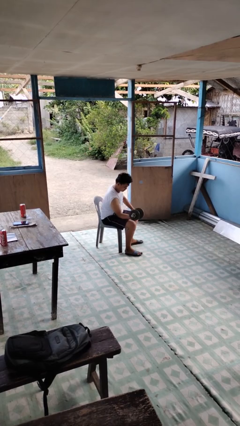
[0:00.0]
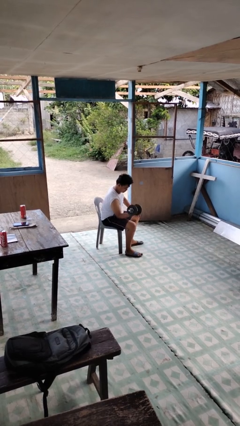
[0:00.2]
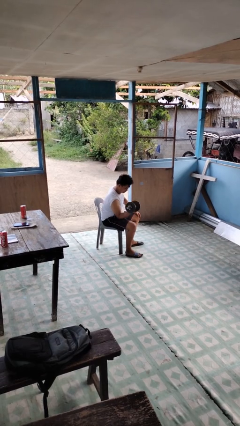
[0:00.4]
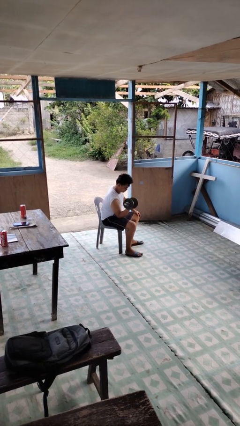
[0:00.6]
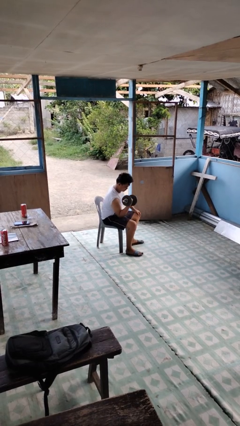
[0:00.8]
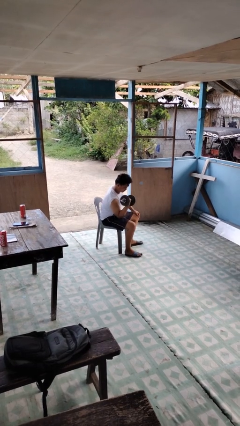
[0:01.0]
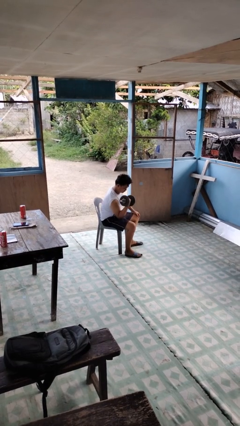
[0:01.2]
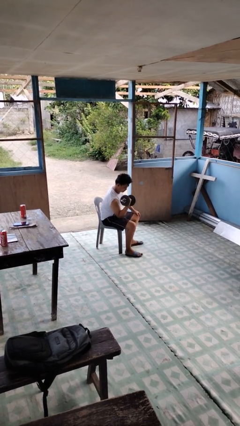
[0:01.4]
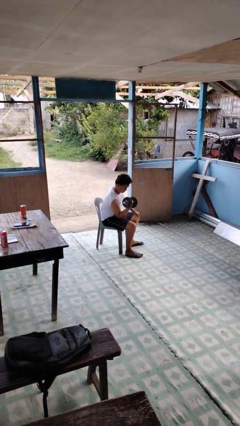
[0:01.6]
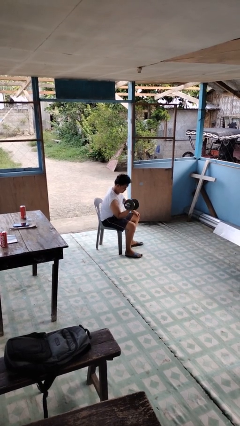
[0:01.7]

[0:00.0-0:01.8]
person lifts dumbbells

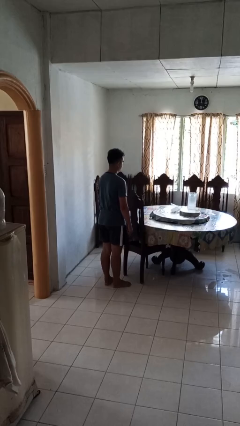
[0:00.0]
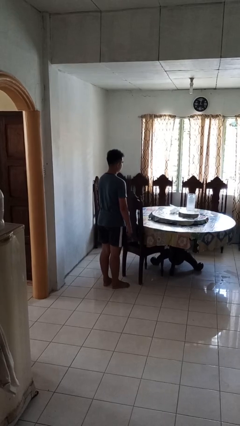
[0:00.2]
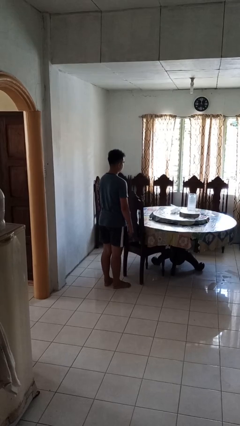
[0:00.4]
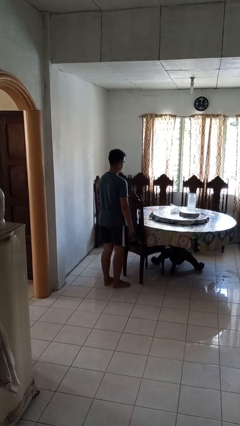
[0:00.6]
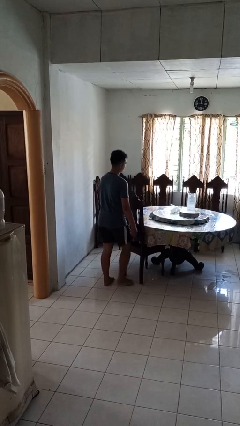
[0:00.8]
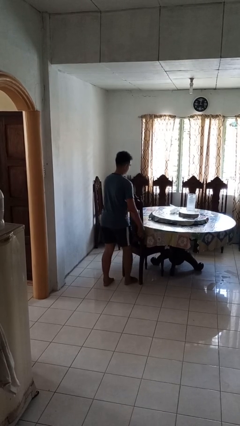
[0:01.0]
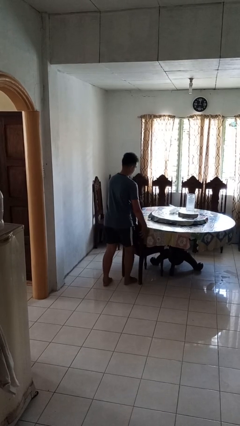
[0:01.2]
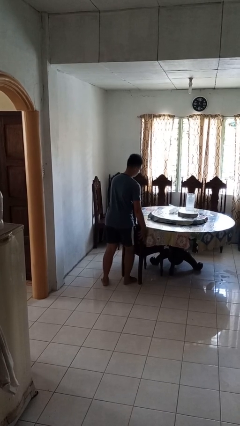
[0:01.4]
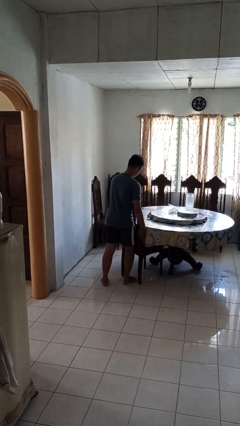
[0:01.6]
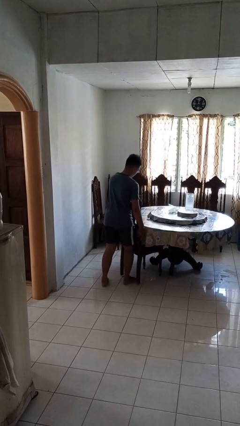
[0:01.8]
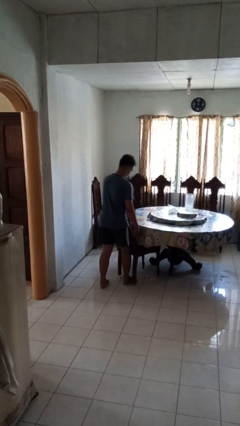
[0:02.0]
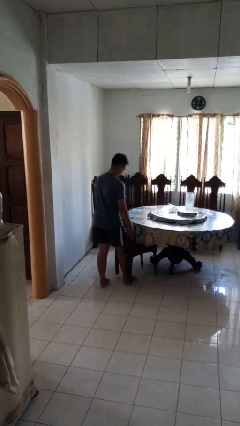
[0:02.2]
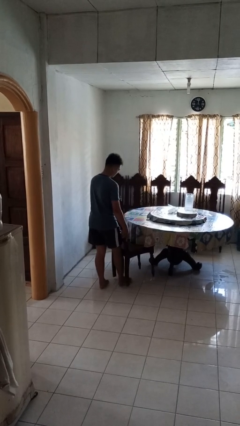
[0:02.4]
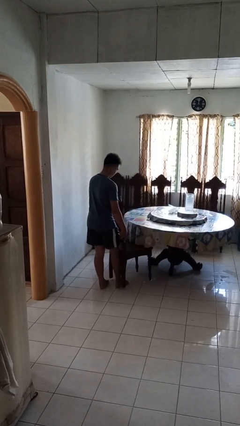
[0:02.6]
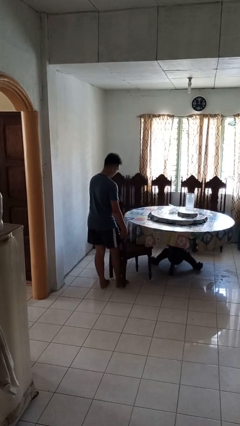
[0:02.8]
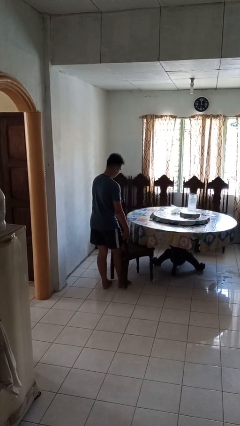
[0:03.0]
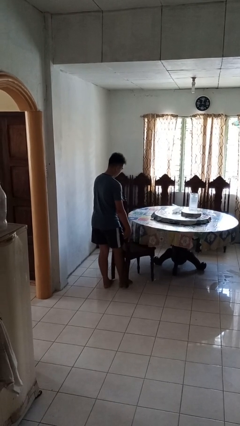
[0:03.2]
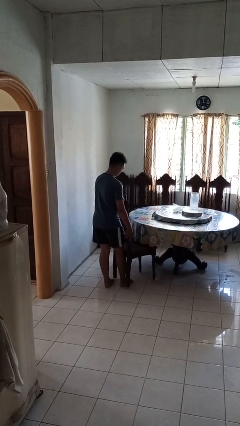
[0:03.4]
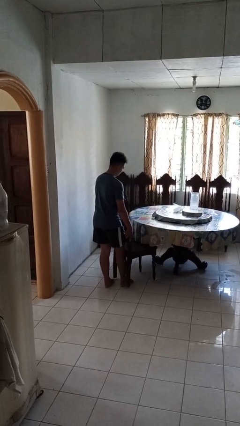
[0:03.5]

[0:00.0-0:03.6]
person pulls out chair

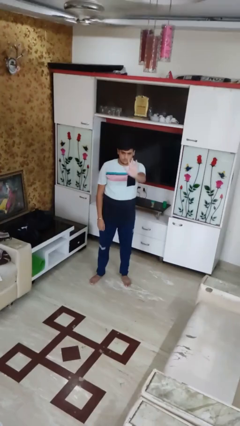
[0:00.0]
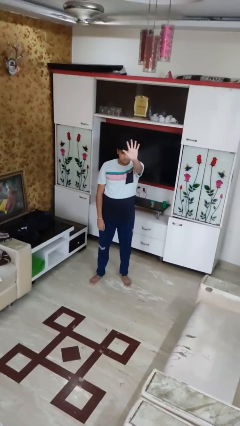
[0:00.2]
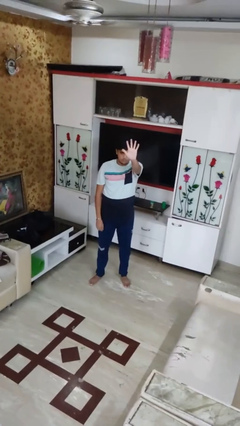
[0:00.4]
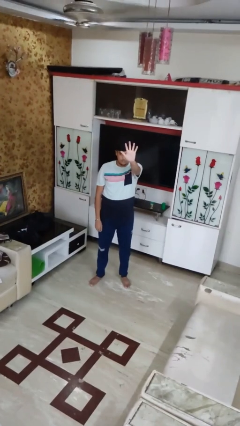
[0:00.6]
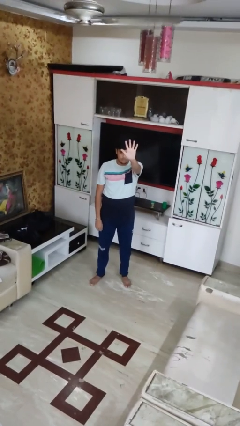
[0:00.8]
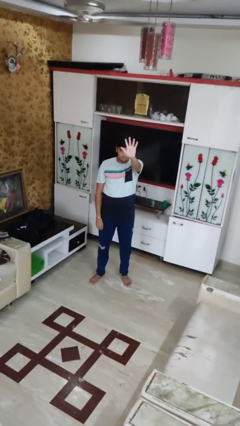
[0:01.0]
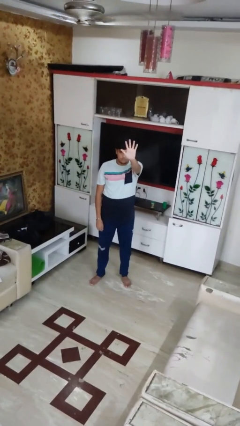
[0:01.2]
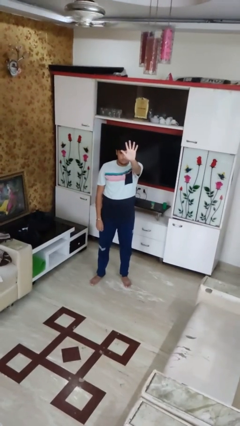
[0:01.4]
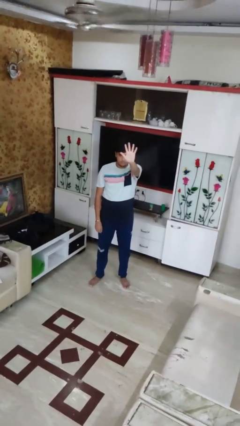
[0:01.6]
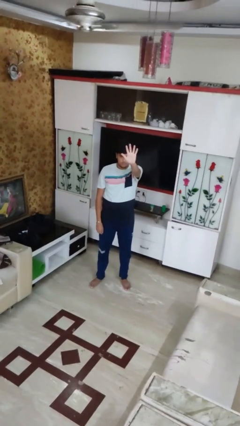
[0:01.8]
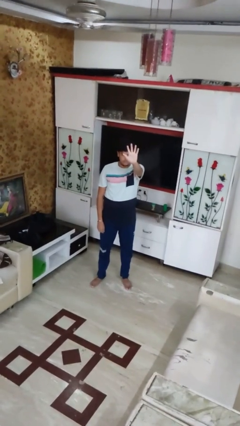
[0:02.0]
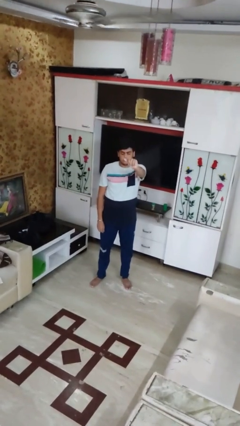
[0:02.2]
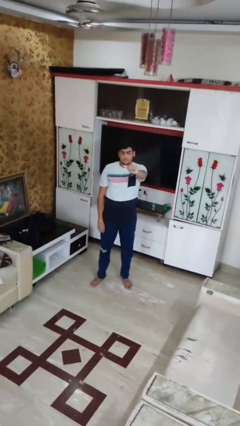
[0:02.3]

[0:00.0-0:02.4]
person gestures number five

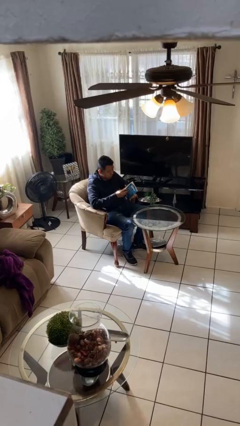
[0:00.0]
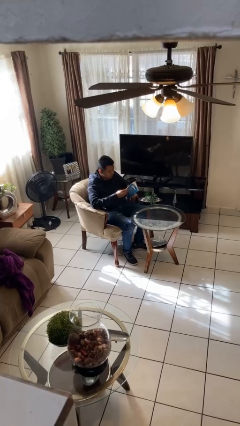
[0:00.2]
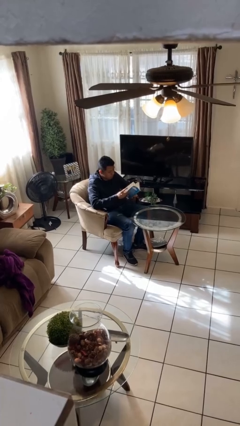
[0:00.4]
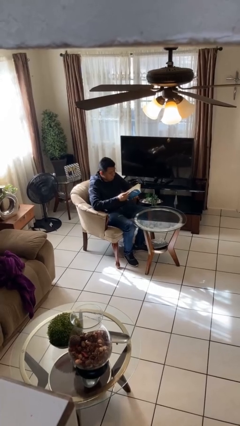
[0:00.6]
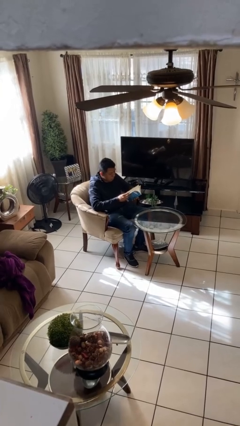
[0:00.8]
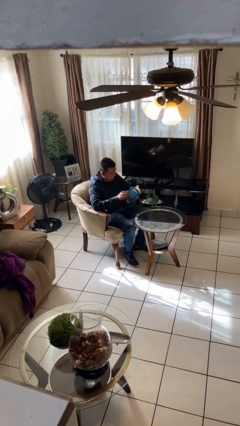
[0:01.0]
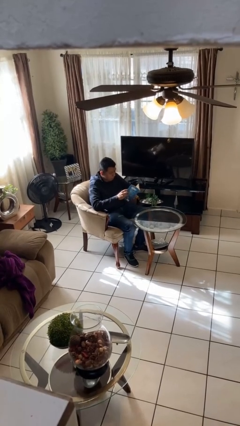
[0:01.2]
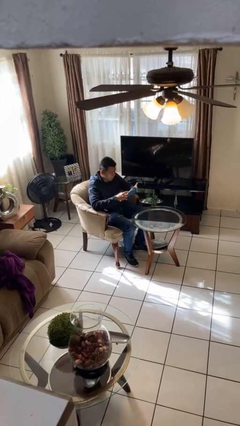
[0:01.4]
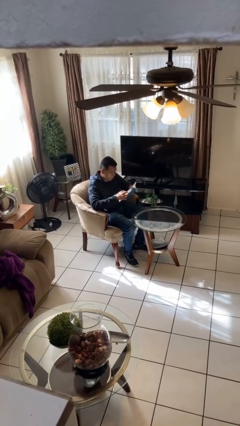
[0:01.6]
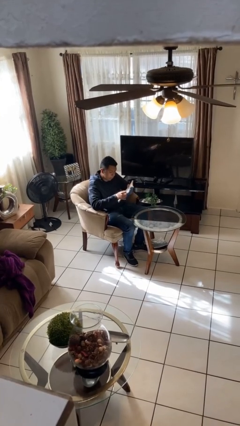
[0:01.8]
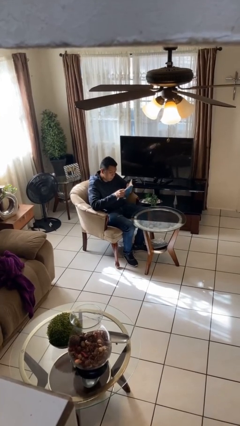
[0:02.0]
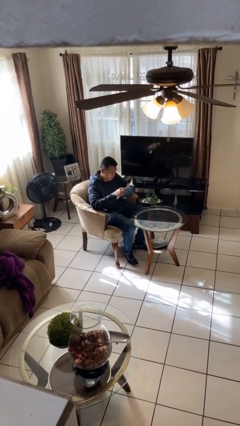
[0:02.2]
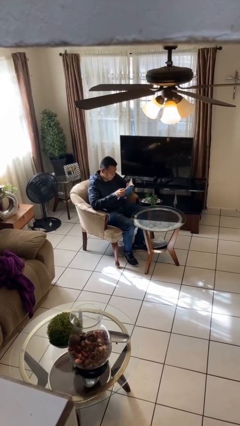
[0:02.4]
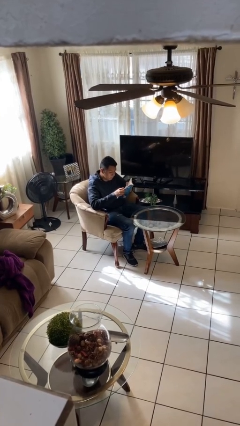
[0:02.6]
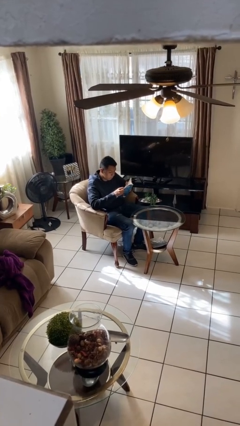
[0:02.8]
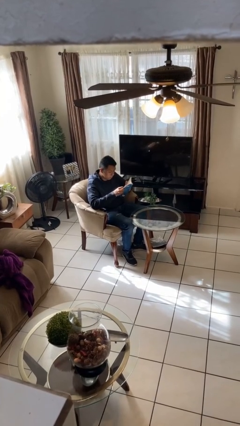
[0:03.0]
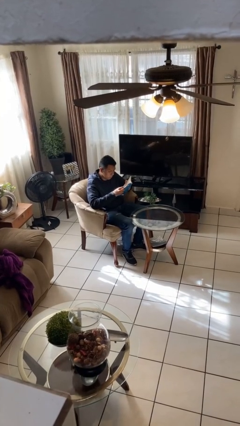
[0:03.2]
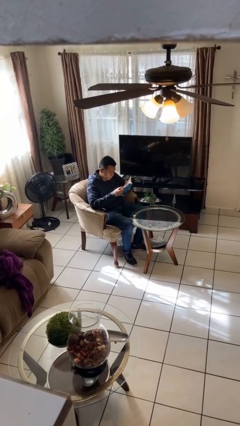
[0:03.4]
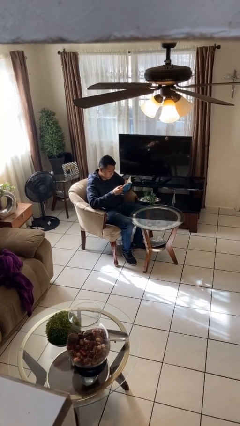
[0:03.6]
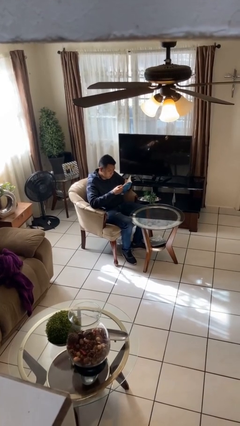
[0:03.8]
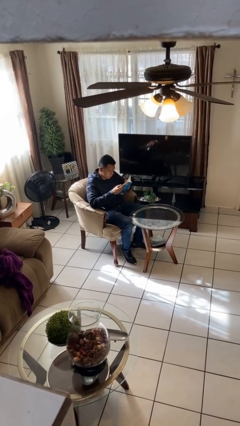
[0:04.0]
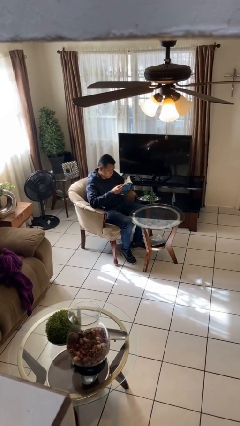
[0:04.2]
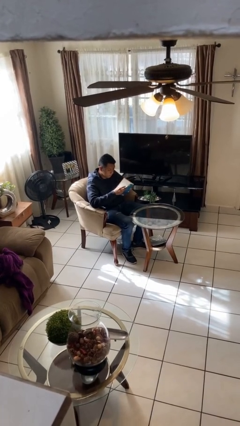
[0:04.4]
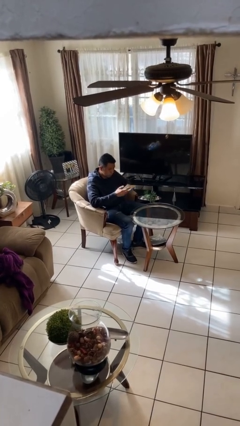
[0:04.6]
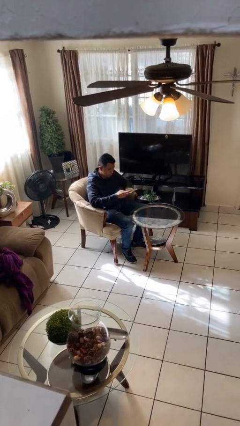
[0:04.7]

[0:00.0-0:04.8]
person reads document

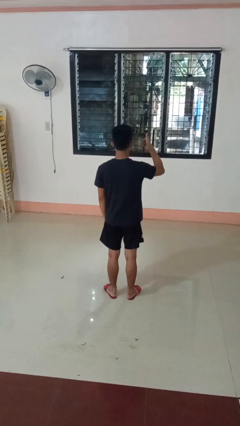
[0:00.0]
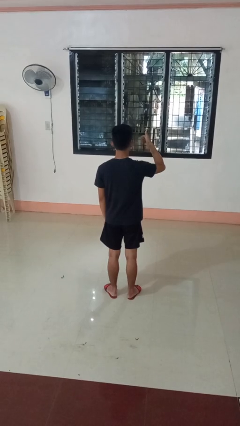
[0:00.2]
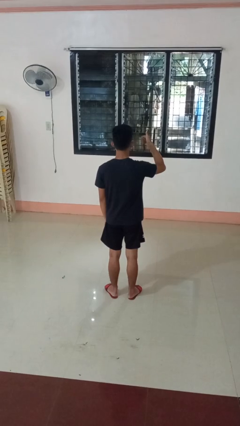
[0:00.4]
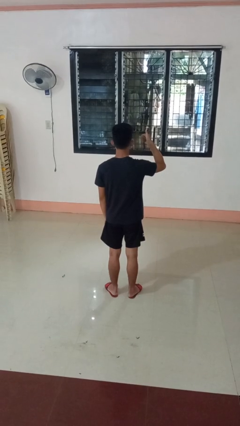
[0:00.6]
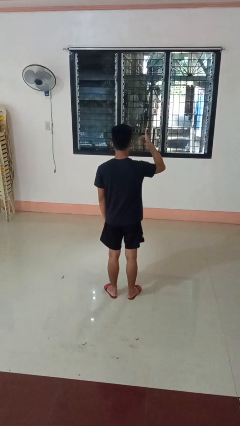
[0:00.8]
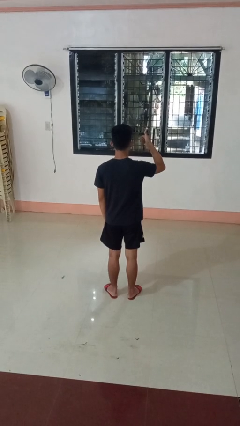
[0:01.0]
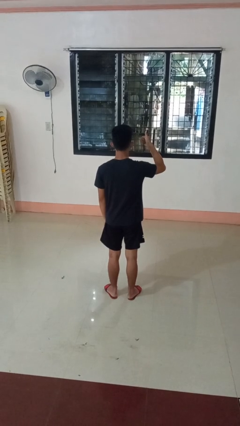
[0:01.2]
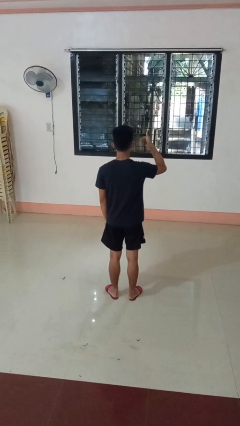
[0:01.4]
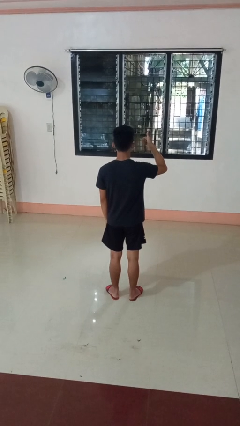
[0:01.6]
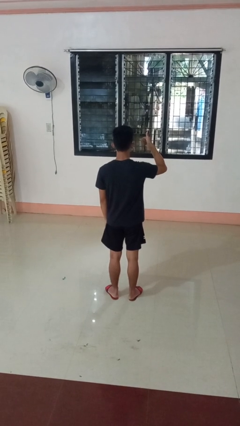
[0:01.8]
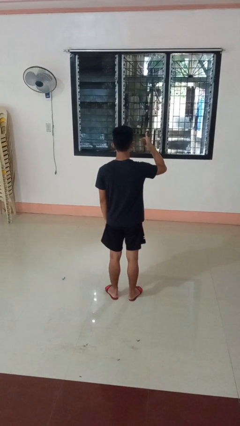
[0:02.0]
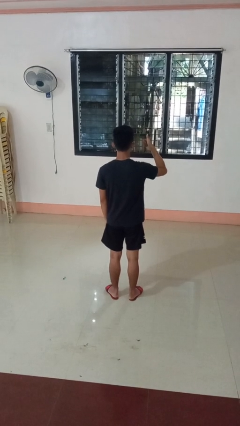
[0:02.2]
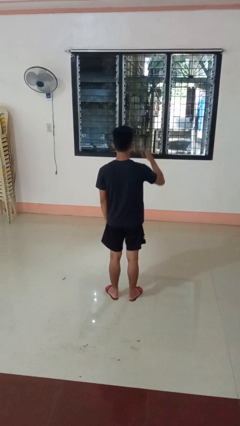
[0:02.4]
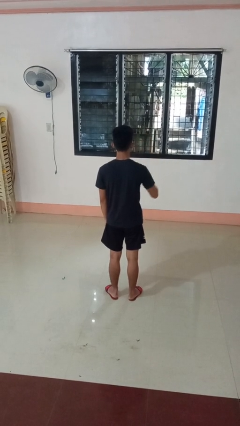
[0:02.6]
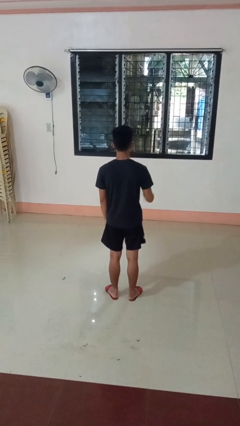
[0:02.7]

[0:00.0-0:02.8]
person gestures thumbs up

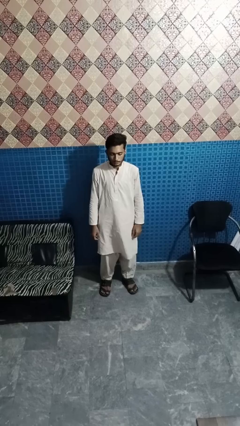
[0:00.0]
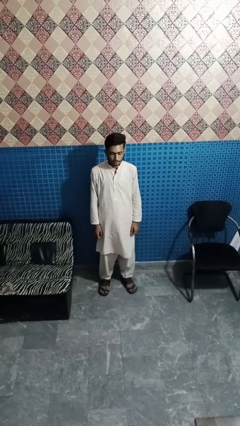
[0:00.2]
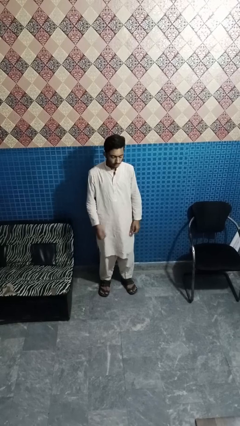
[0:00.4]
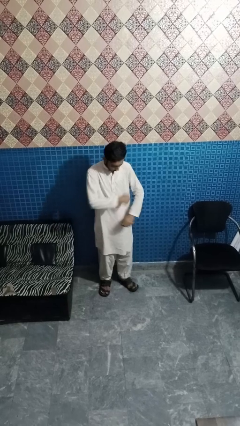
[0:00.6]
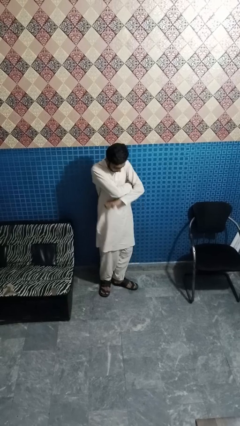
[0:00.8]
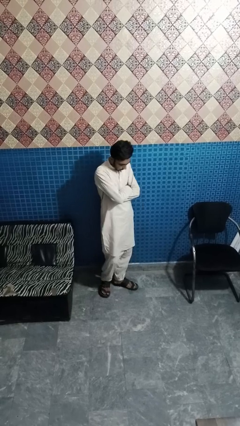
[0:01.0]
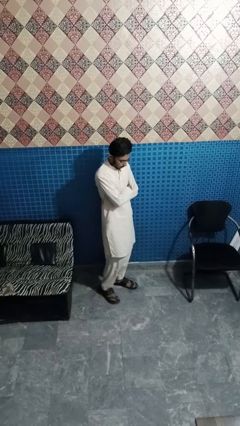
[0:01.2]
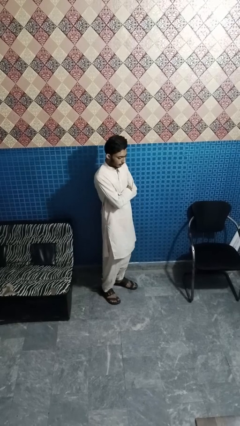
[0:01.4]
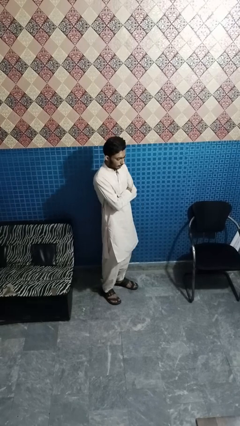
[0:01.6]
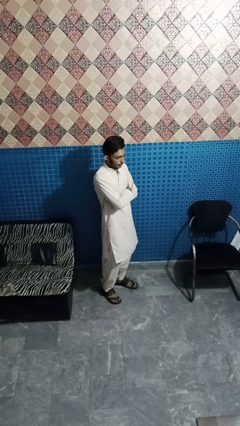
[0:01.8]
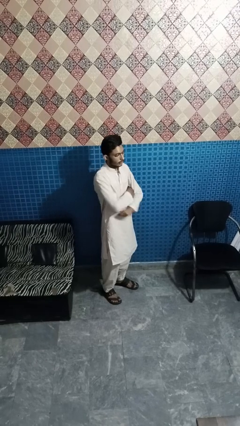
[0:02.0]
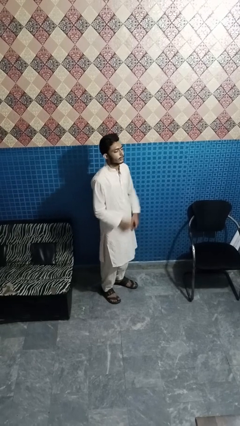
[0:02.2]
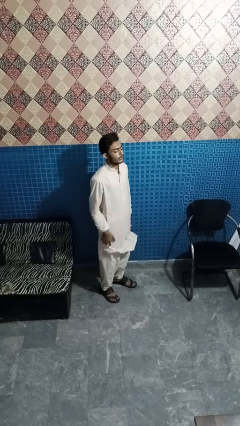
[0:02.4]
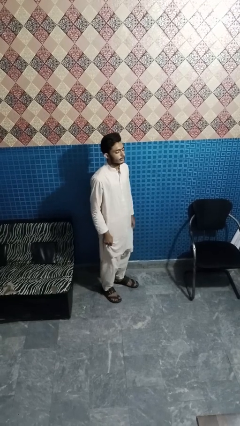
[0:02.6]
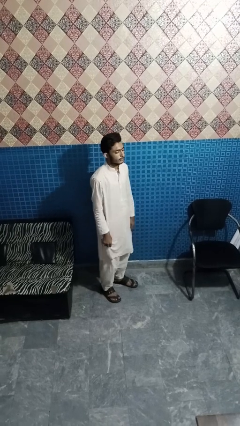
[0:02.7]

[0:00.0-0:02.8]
person crosses arms
